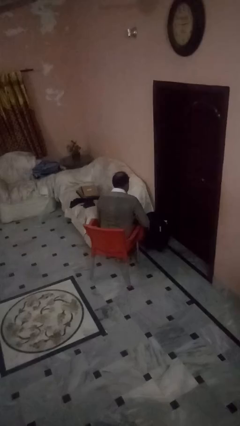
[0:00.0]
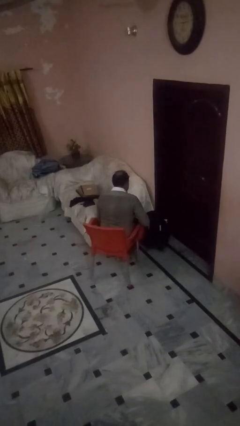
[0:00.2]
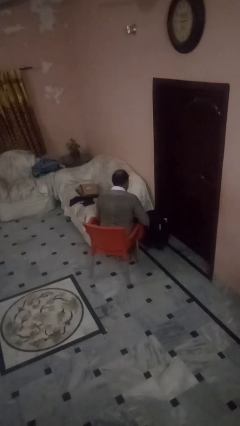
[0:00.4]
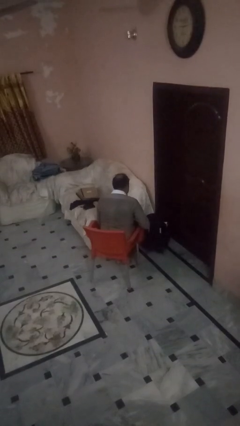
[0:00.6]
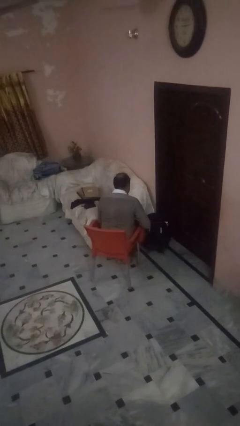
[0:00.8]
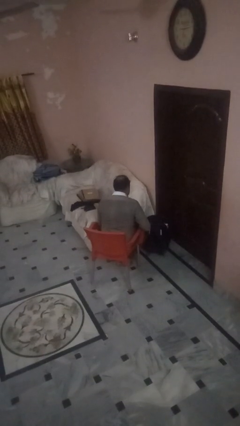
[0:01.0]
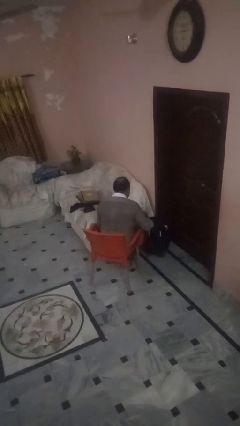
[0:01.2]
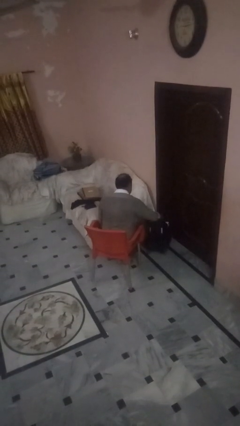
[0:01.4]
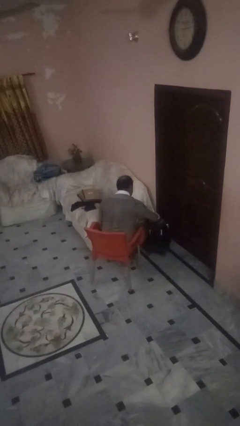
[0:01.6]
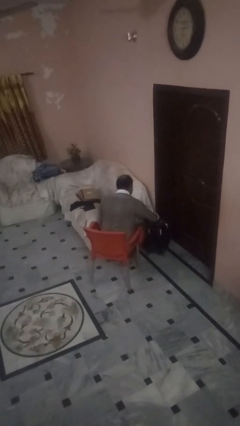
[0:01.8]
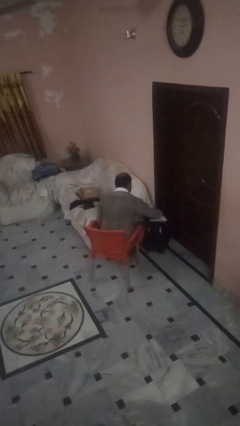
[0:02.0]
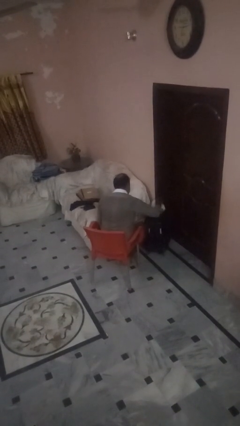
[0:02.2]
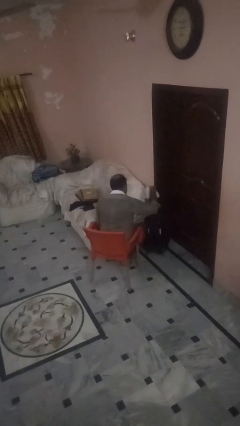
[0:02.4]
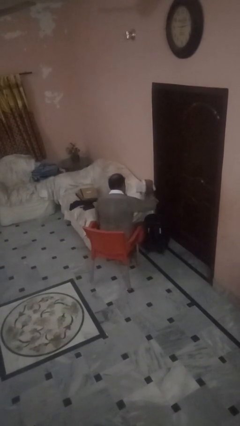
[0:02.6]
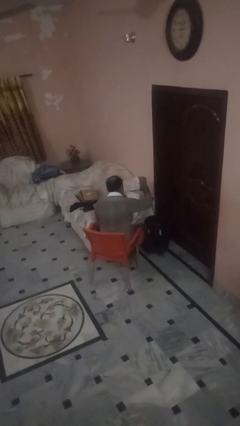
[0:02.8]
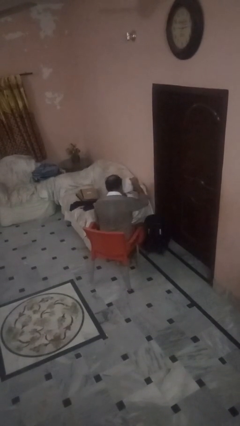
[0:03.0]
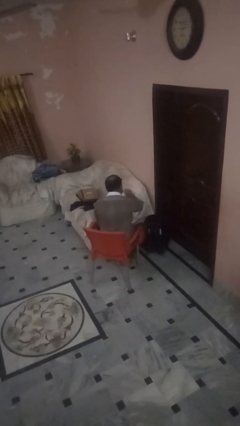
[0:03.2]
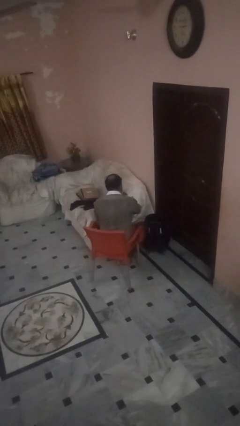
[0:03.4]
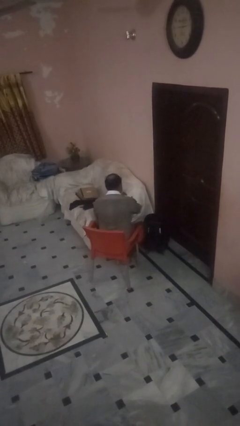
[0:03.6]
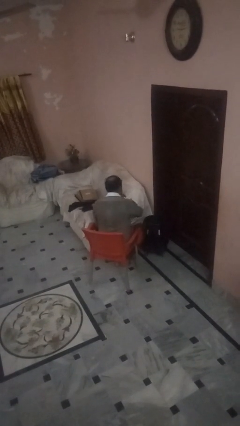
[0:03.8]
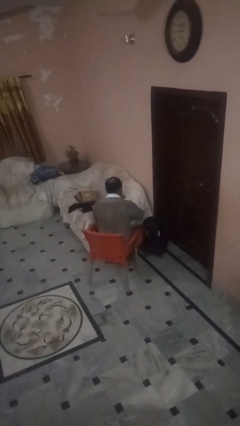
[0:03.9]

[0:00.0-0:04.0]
person unloads clothes from suitcase

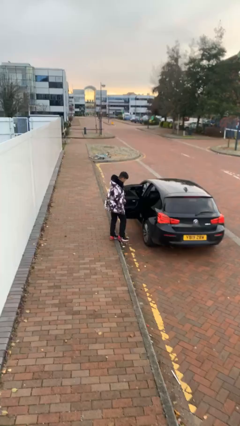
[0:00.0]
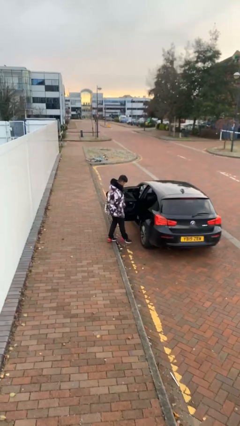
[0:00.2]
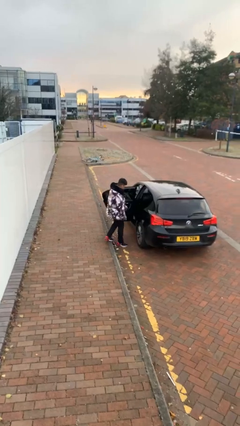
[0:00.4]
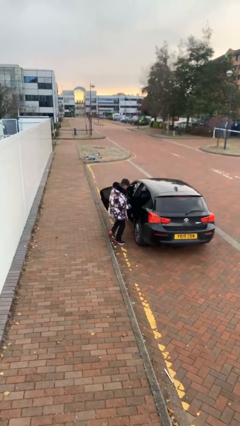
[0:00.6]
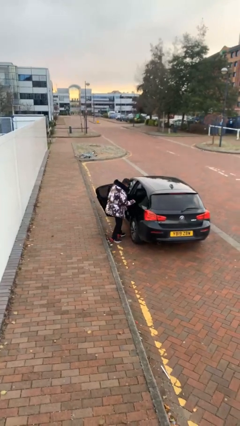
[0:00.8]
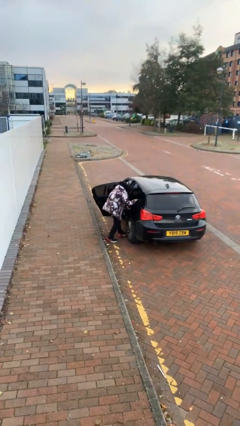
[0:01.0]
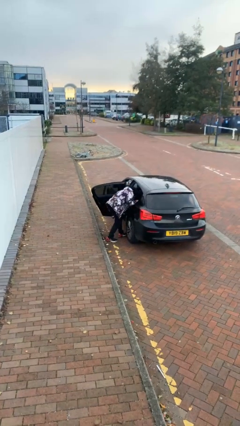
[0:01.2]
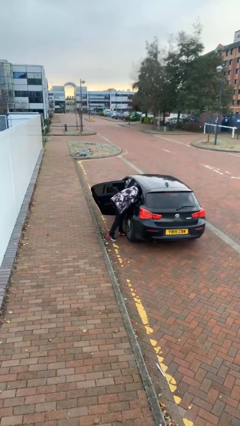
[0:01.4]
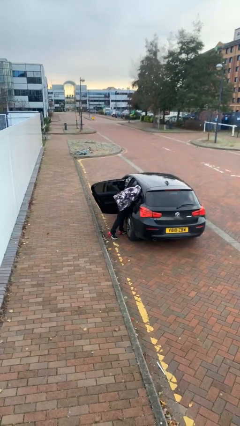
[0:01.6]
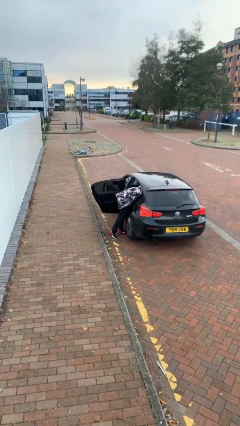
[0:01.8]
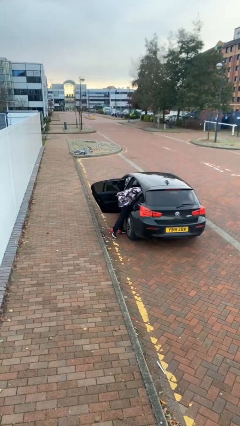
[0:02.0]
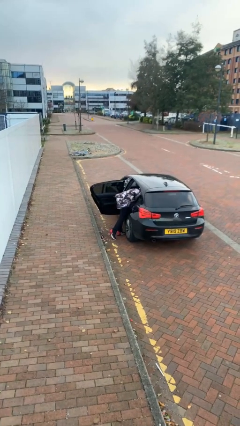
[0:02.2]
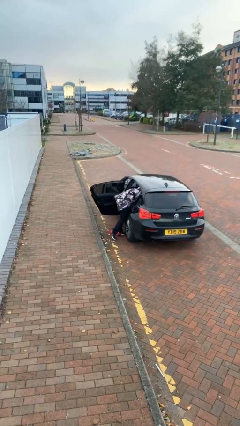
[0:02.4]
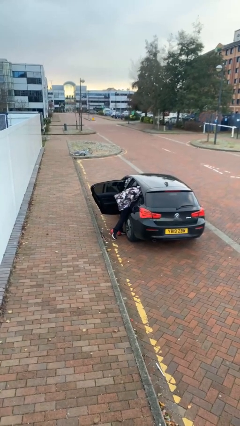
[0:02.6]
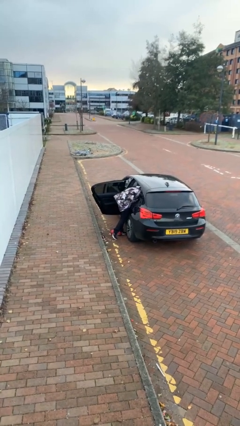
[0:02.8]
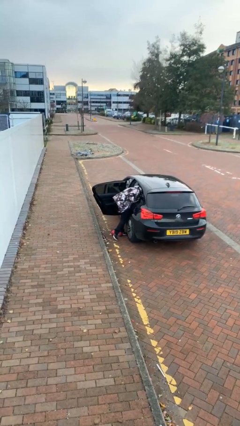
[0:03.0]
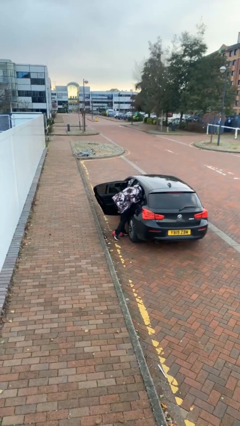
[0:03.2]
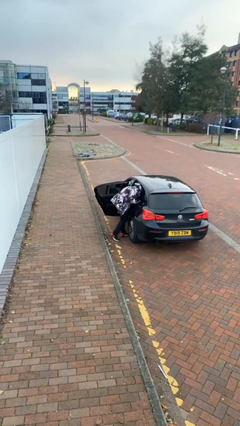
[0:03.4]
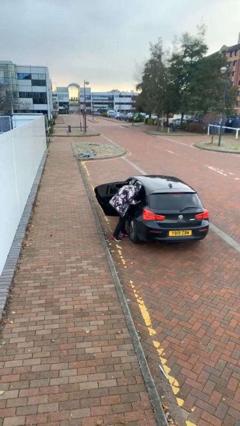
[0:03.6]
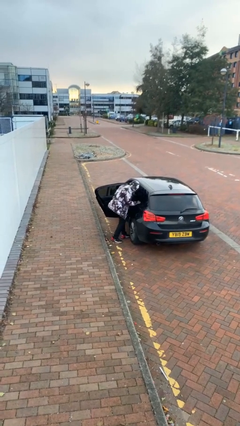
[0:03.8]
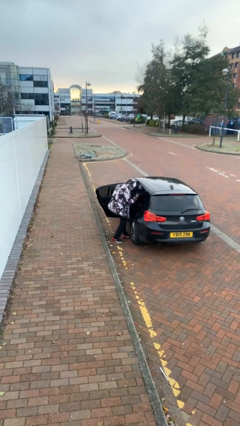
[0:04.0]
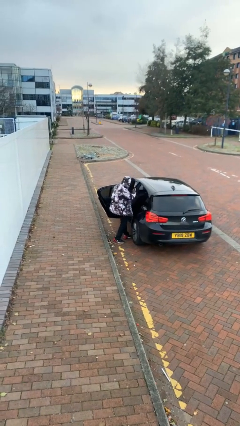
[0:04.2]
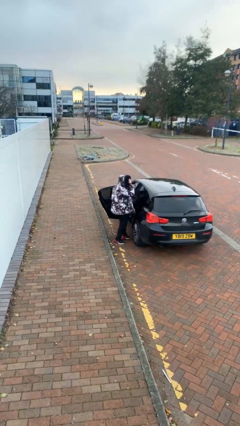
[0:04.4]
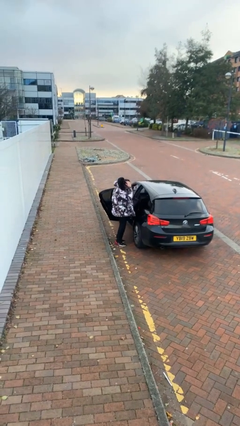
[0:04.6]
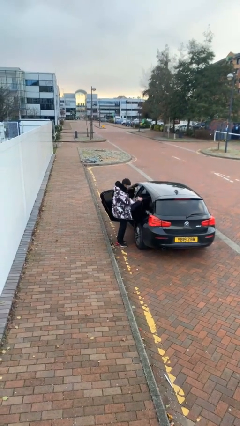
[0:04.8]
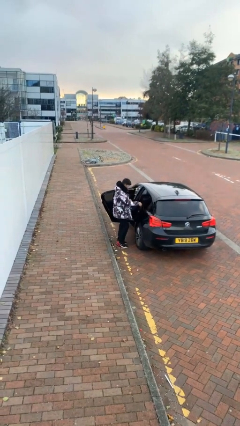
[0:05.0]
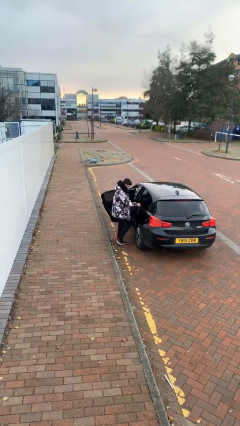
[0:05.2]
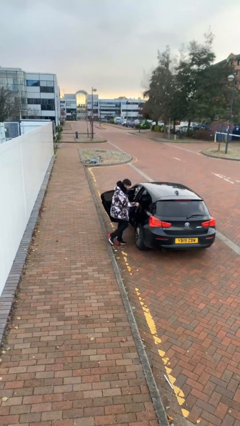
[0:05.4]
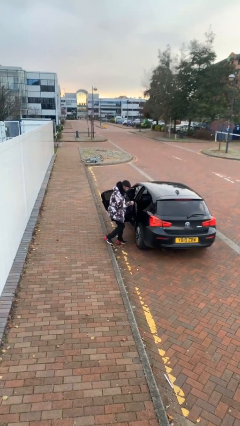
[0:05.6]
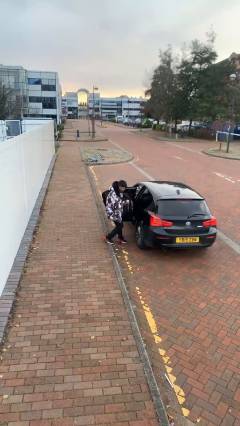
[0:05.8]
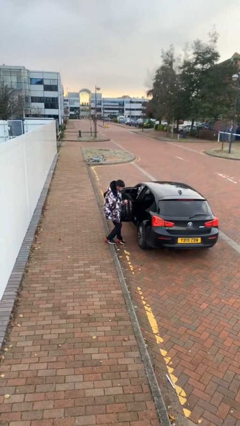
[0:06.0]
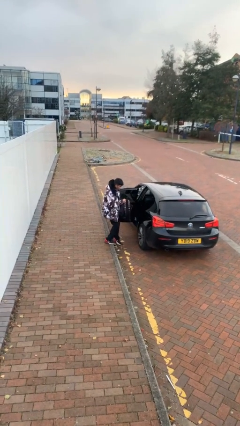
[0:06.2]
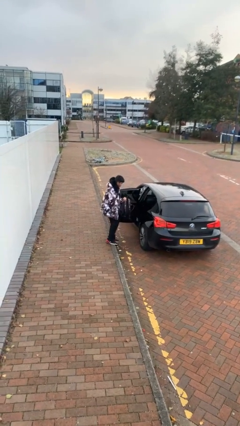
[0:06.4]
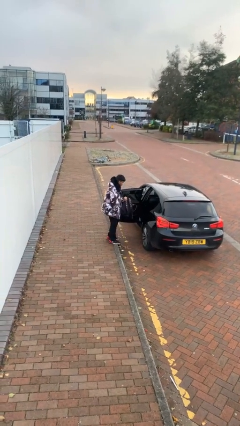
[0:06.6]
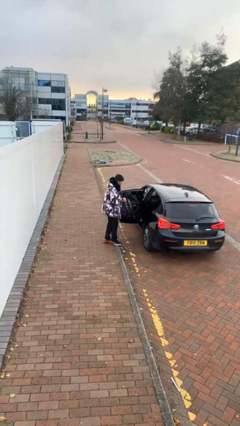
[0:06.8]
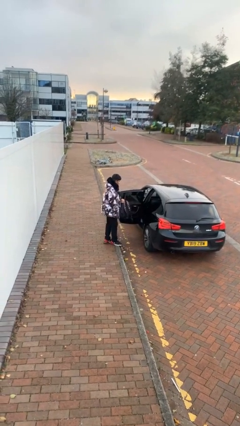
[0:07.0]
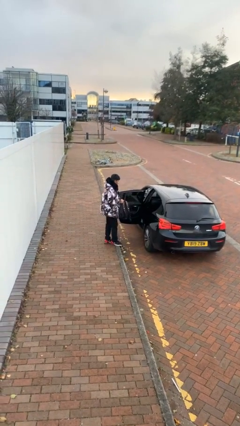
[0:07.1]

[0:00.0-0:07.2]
person unloads car

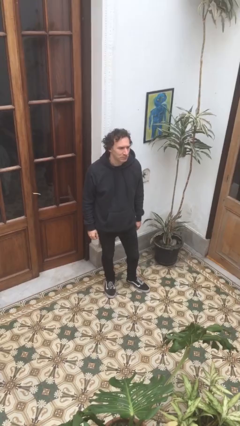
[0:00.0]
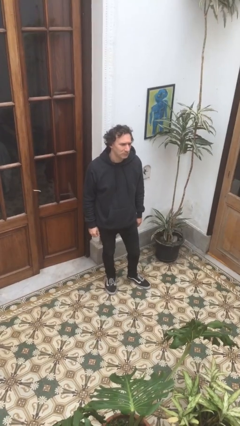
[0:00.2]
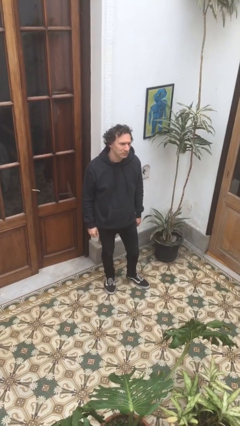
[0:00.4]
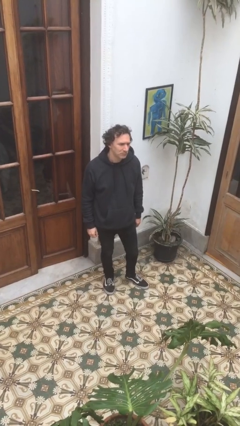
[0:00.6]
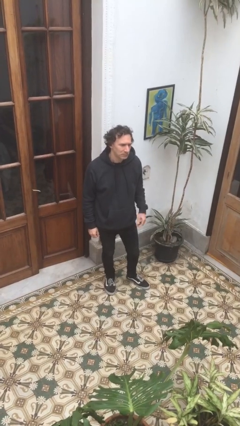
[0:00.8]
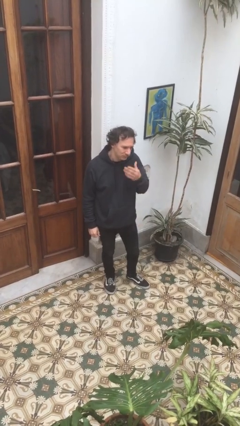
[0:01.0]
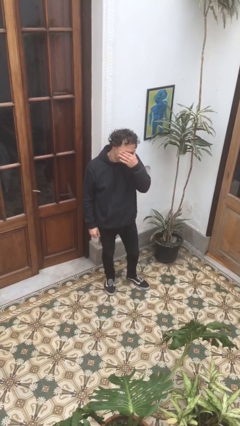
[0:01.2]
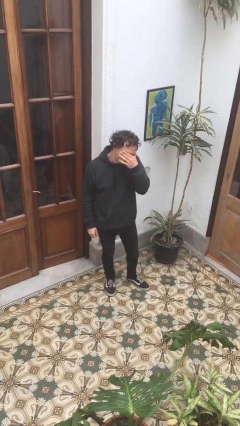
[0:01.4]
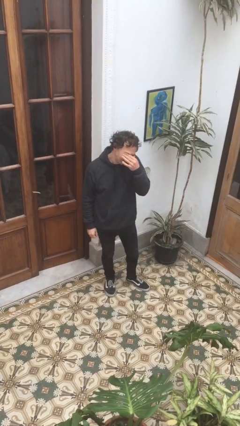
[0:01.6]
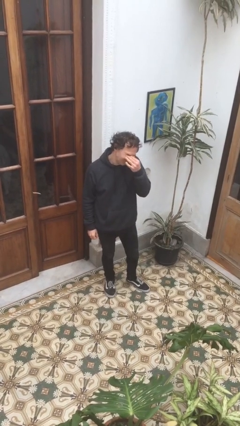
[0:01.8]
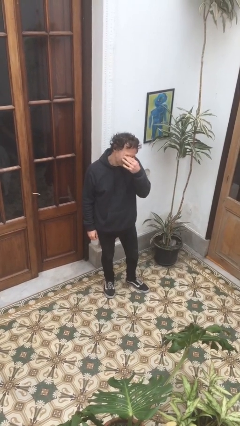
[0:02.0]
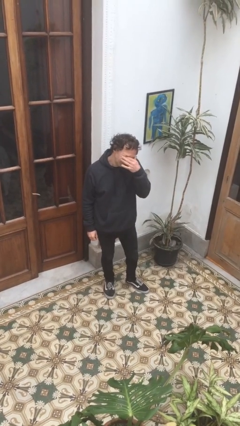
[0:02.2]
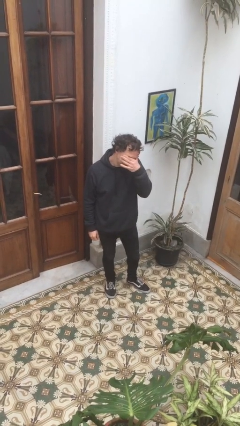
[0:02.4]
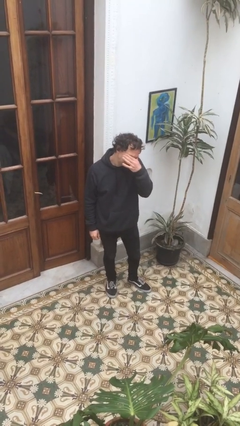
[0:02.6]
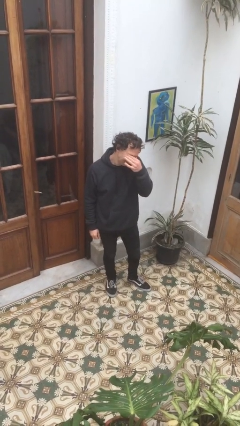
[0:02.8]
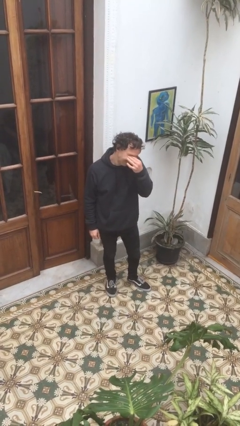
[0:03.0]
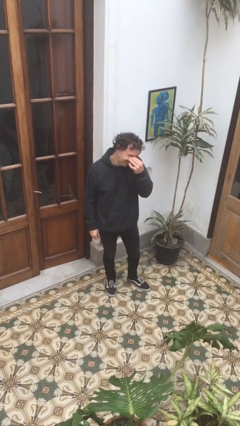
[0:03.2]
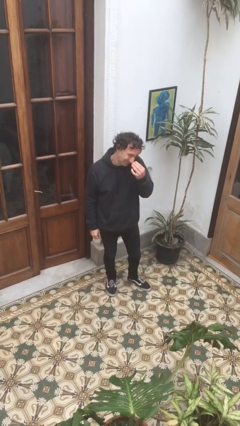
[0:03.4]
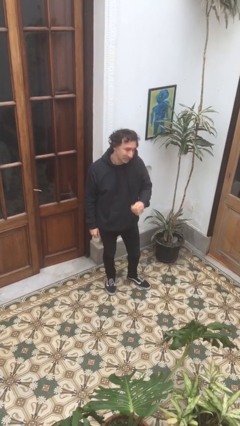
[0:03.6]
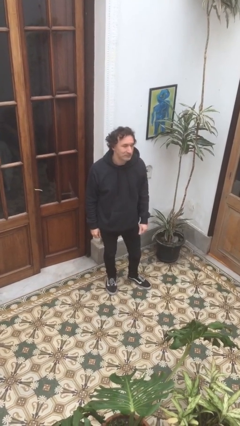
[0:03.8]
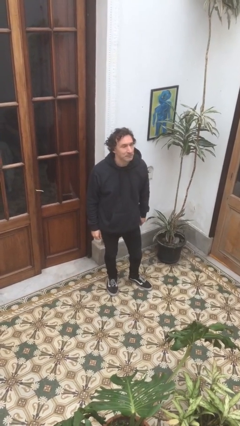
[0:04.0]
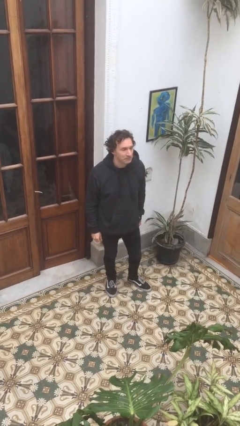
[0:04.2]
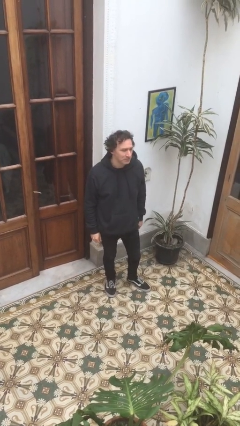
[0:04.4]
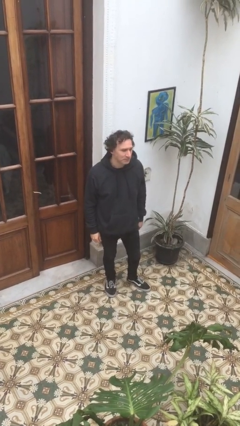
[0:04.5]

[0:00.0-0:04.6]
person rubs eyes

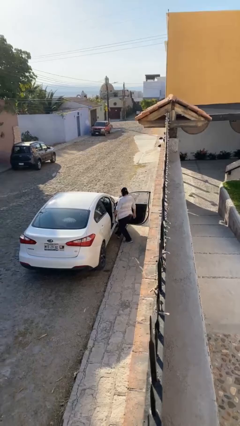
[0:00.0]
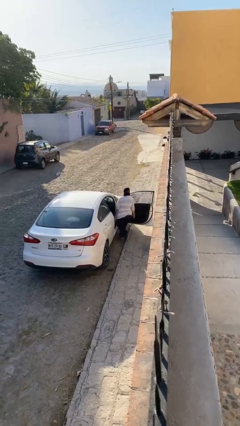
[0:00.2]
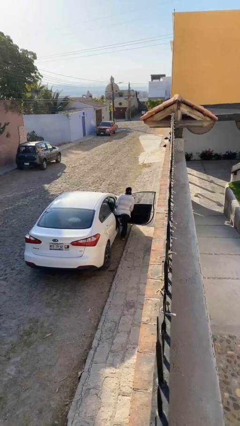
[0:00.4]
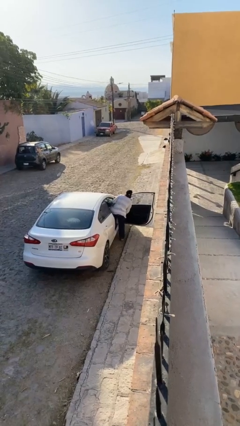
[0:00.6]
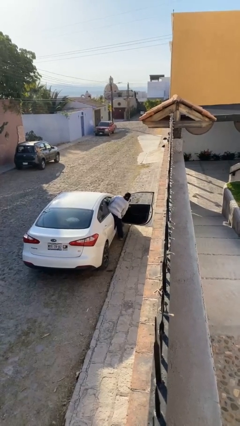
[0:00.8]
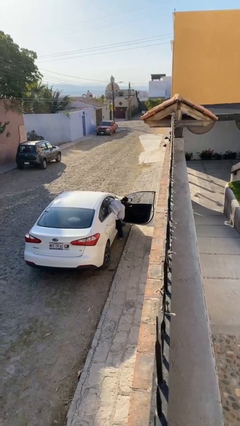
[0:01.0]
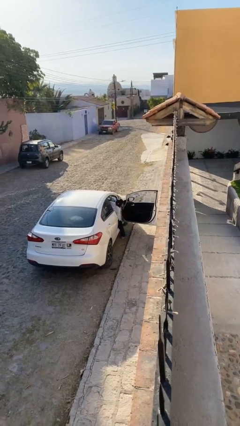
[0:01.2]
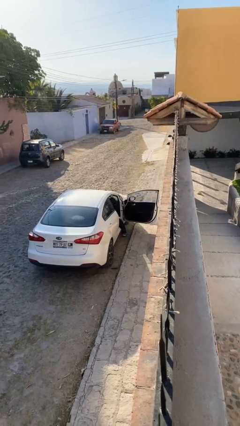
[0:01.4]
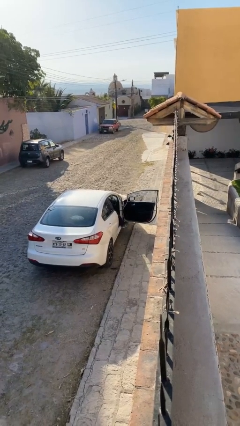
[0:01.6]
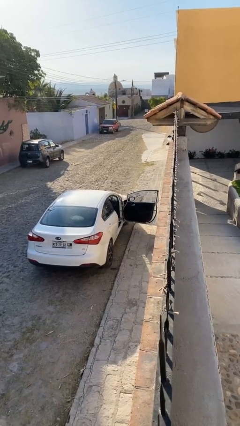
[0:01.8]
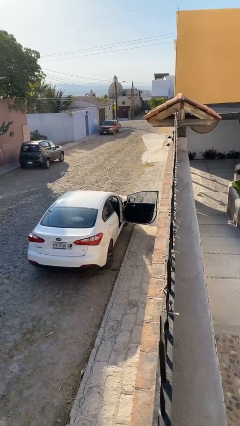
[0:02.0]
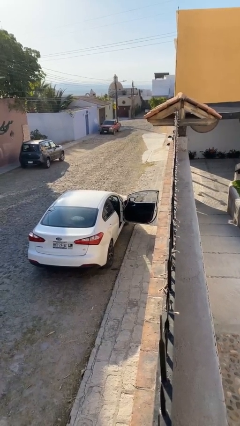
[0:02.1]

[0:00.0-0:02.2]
person enters car
